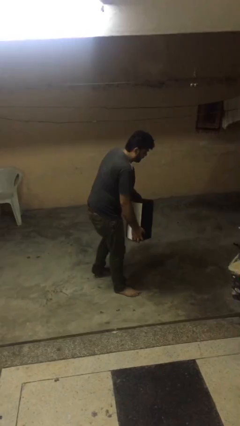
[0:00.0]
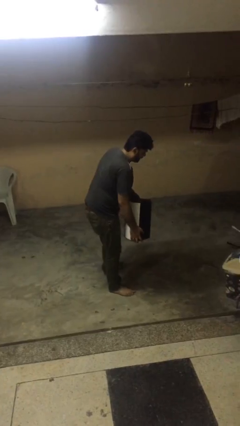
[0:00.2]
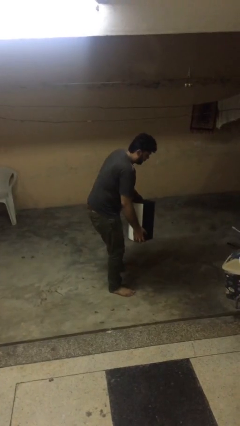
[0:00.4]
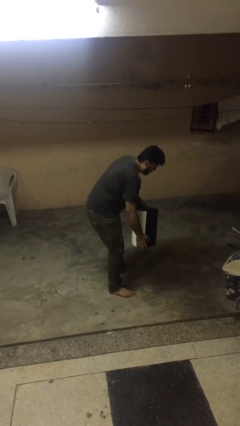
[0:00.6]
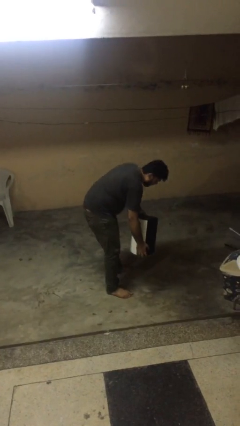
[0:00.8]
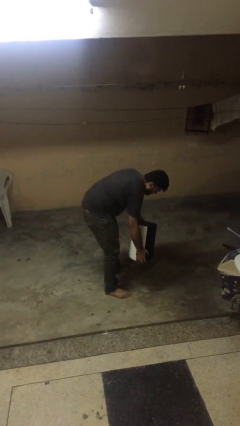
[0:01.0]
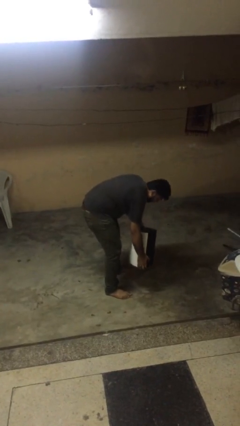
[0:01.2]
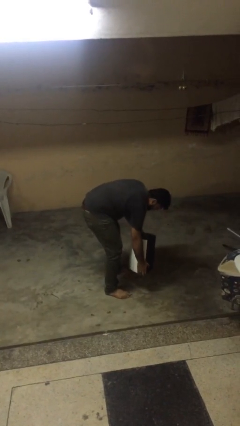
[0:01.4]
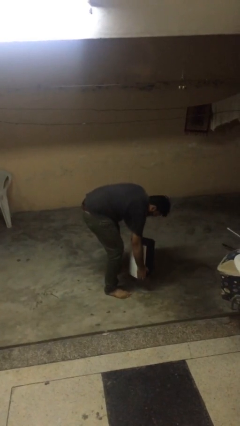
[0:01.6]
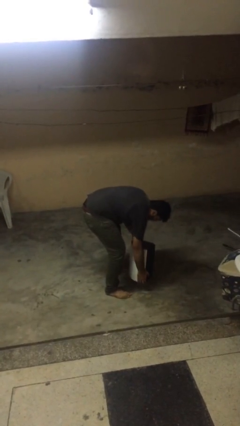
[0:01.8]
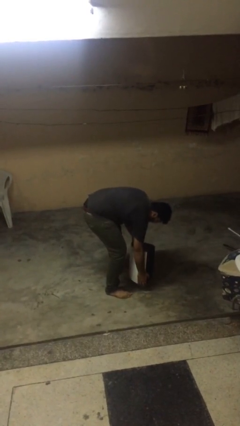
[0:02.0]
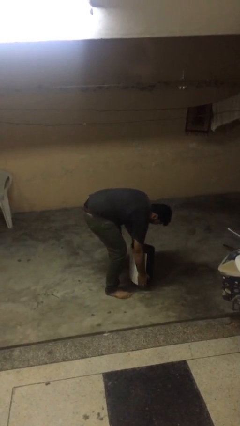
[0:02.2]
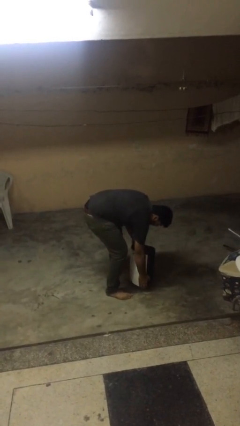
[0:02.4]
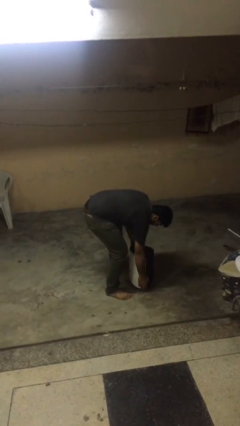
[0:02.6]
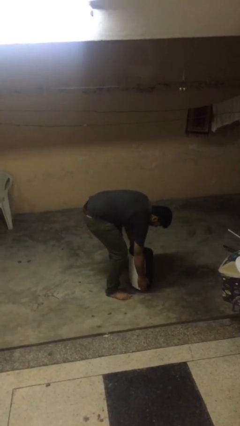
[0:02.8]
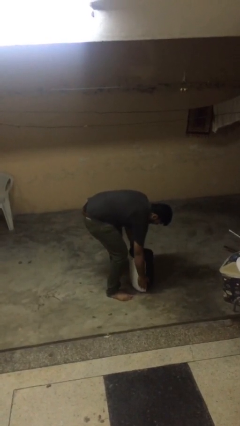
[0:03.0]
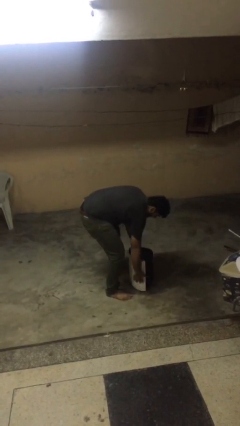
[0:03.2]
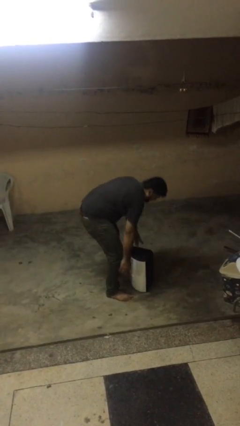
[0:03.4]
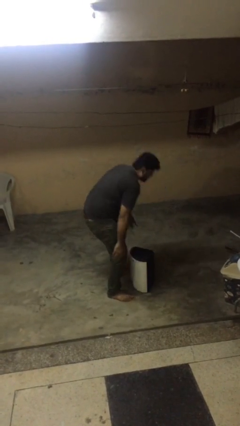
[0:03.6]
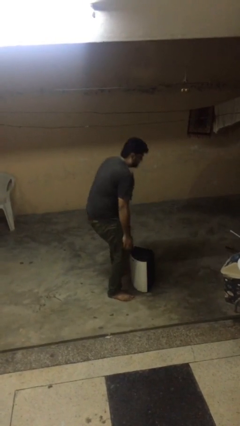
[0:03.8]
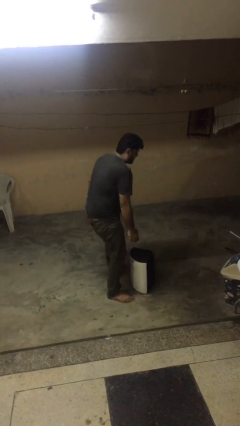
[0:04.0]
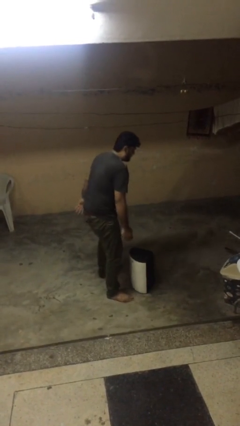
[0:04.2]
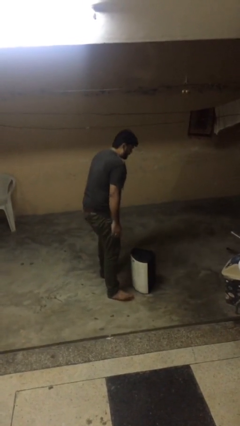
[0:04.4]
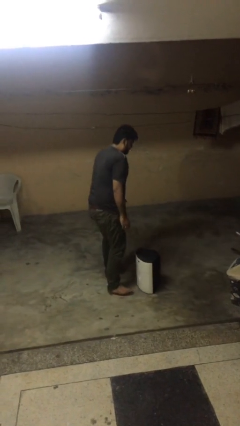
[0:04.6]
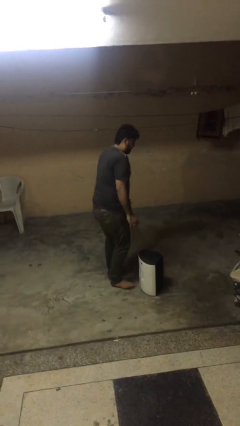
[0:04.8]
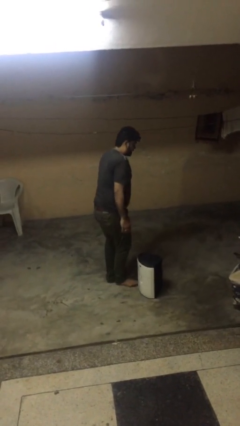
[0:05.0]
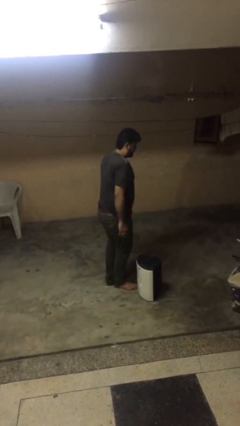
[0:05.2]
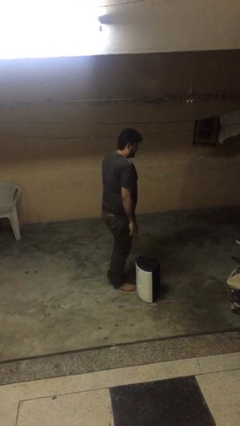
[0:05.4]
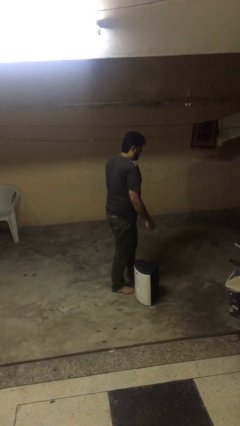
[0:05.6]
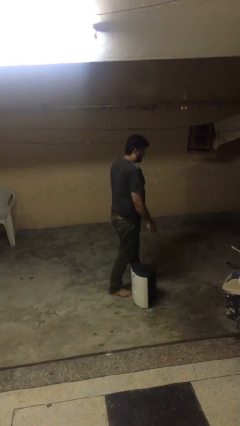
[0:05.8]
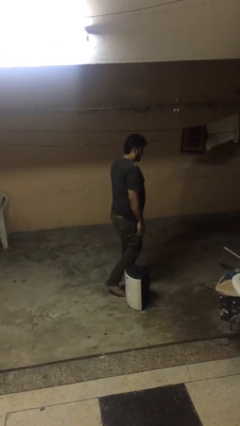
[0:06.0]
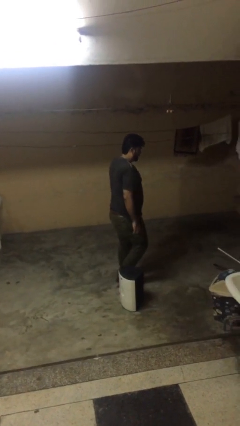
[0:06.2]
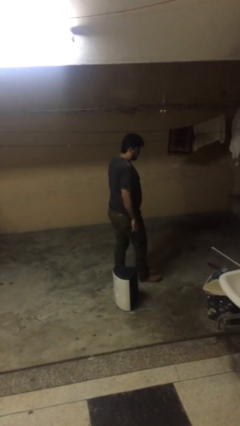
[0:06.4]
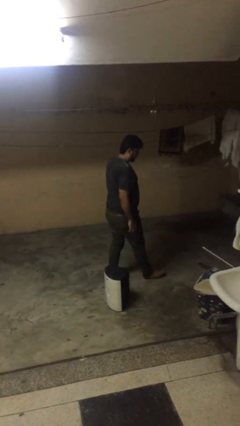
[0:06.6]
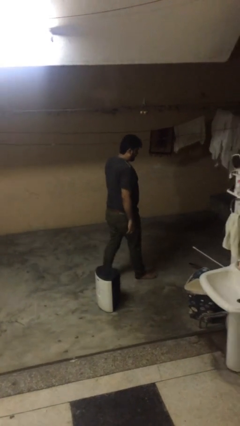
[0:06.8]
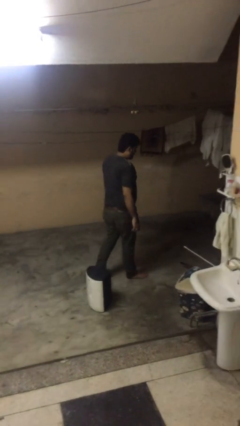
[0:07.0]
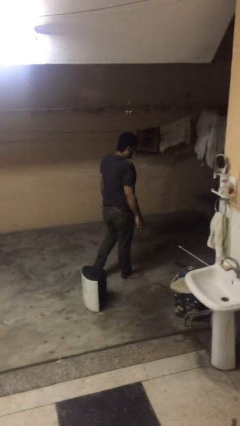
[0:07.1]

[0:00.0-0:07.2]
person puts down object on floor

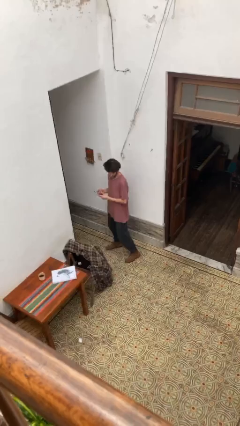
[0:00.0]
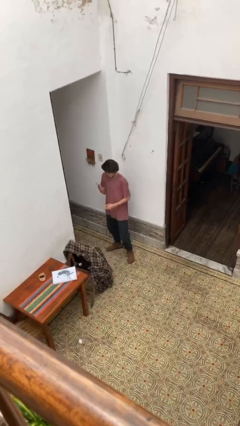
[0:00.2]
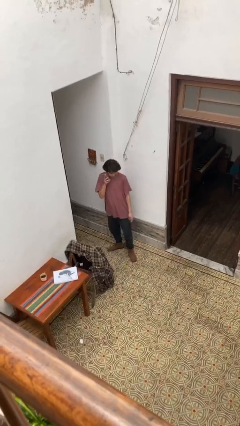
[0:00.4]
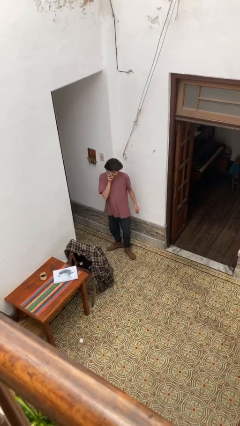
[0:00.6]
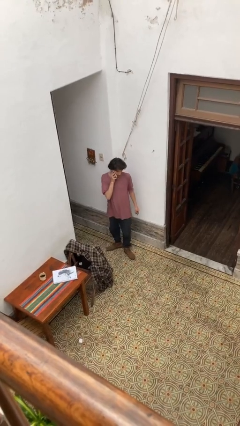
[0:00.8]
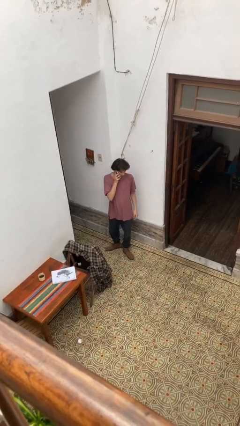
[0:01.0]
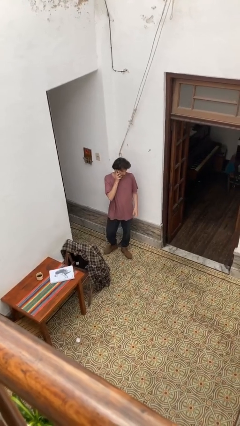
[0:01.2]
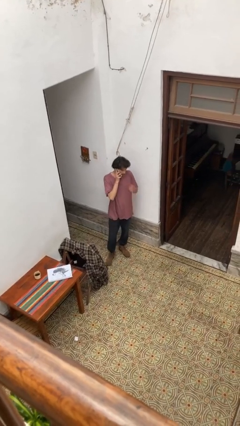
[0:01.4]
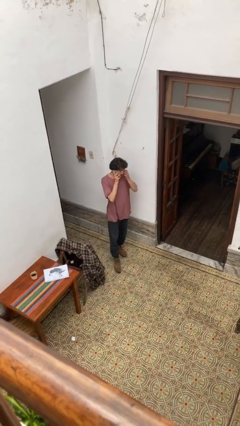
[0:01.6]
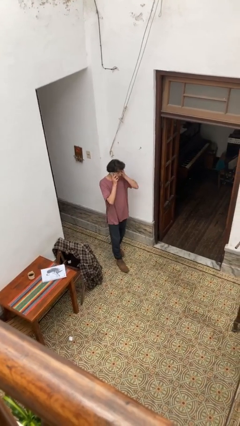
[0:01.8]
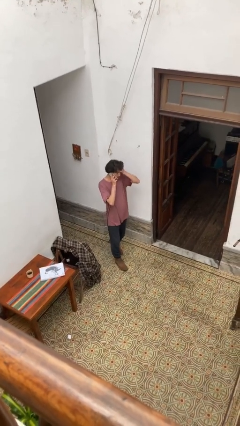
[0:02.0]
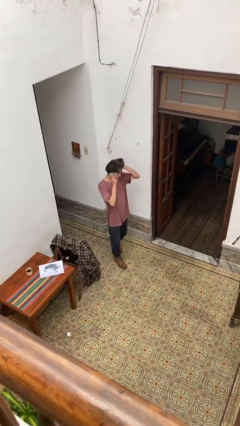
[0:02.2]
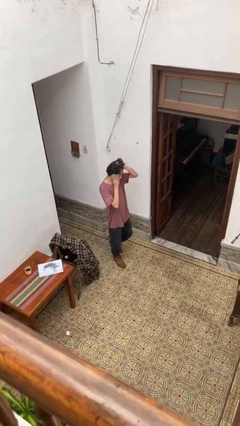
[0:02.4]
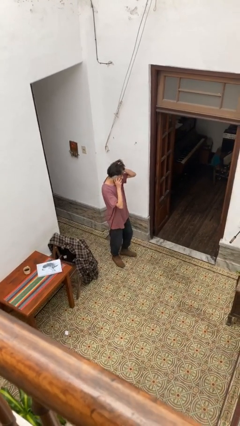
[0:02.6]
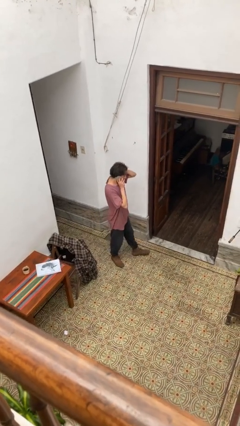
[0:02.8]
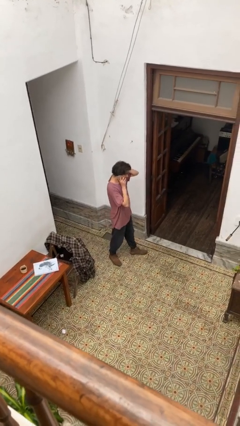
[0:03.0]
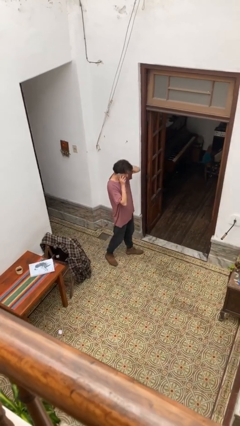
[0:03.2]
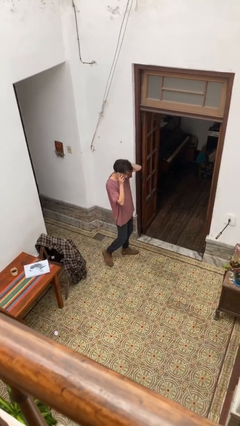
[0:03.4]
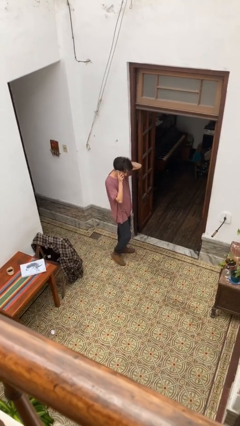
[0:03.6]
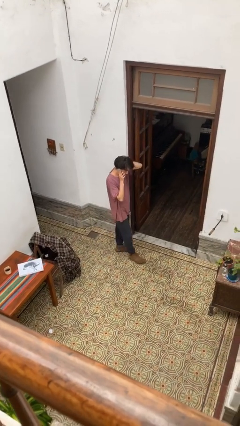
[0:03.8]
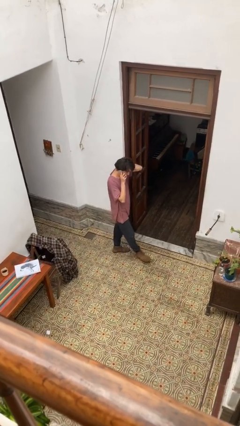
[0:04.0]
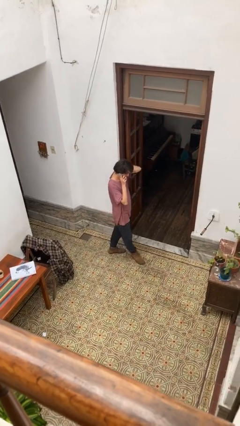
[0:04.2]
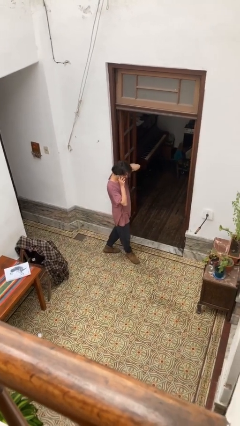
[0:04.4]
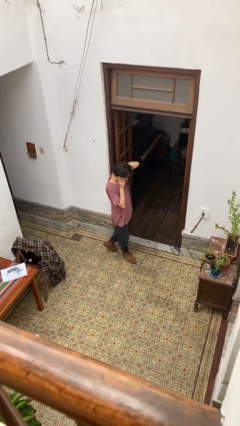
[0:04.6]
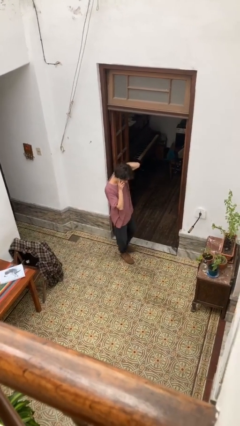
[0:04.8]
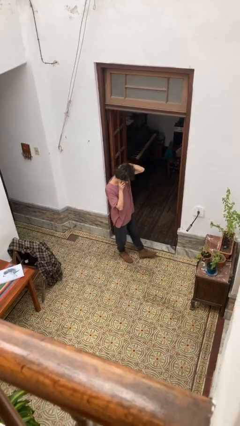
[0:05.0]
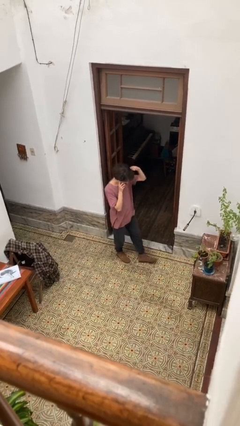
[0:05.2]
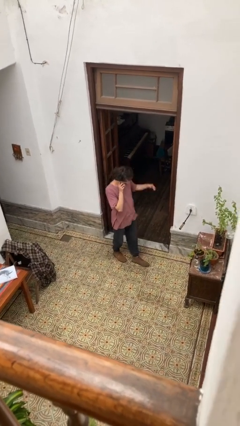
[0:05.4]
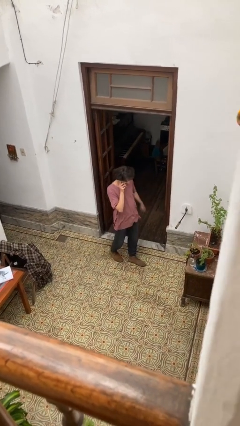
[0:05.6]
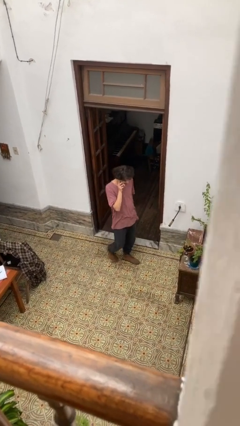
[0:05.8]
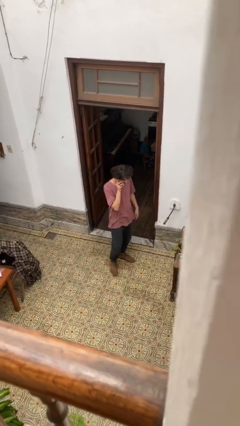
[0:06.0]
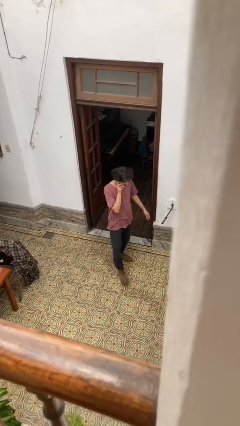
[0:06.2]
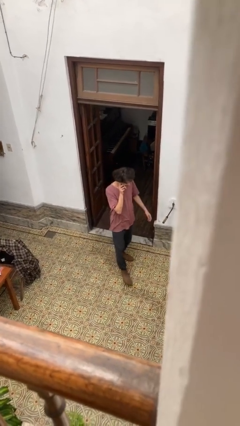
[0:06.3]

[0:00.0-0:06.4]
person talks on phone

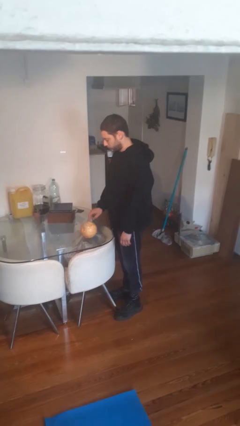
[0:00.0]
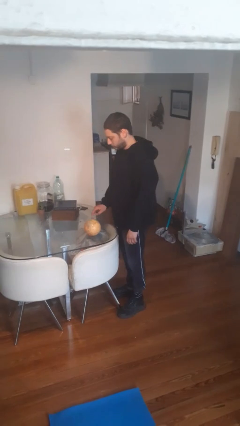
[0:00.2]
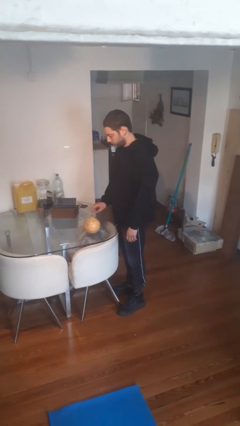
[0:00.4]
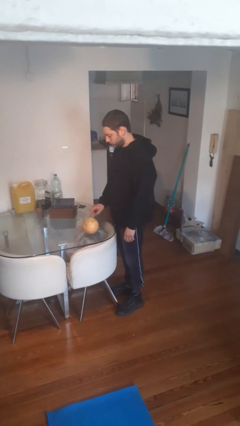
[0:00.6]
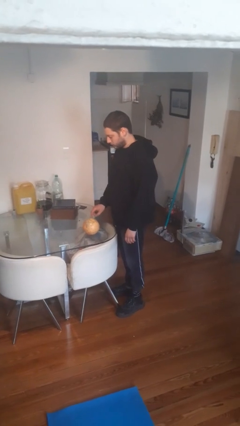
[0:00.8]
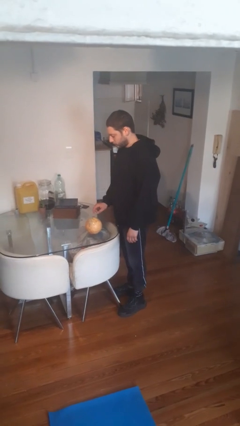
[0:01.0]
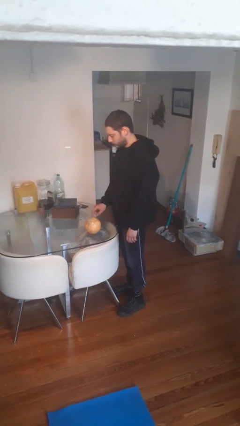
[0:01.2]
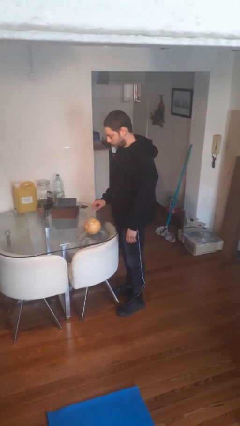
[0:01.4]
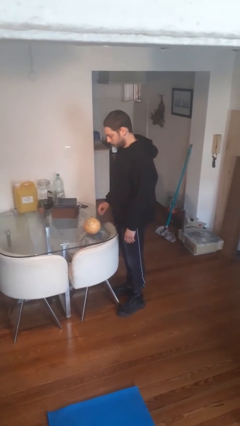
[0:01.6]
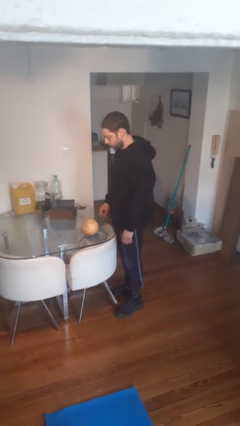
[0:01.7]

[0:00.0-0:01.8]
person taps object with finger

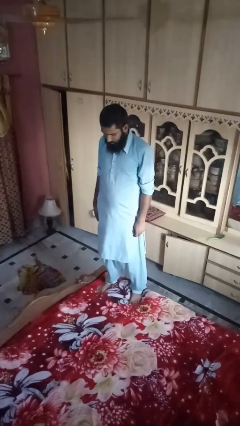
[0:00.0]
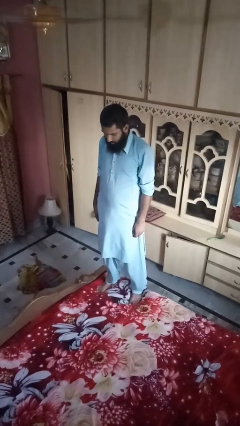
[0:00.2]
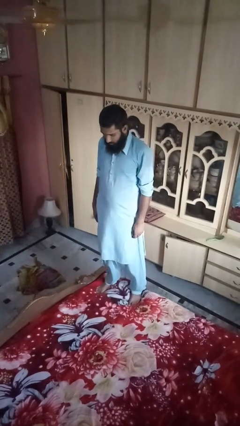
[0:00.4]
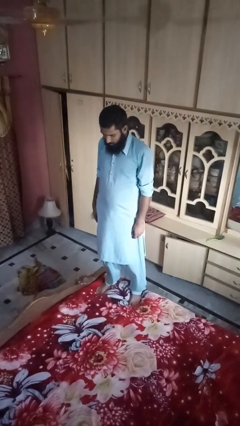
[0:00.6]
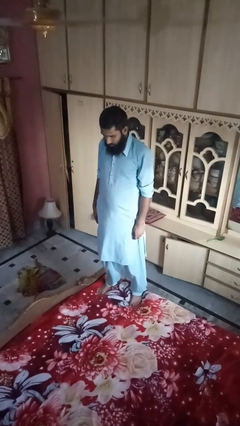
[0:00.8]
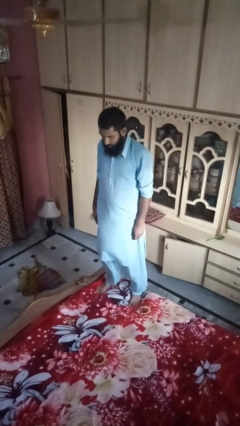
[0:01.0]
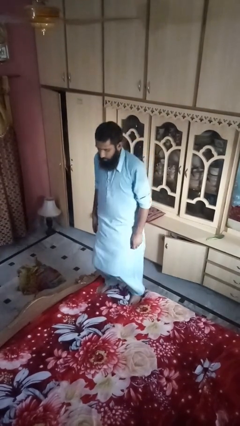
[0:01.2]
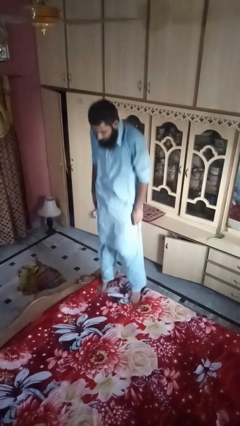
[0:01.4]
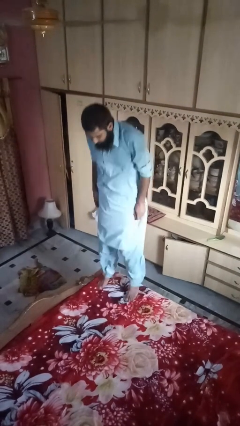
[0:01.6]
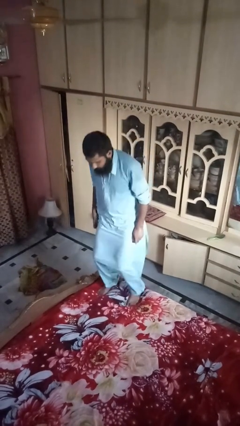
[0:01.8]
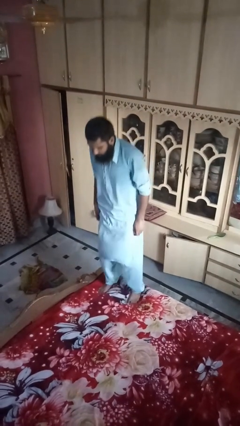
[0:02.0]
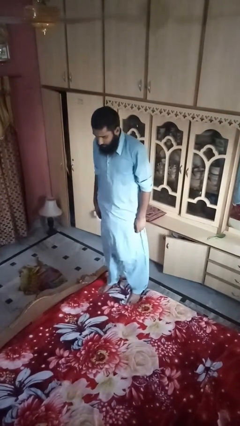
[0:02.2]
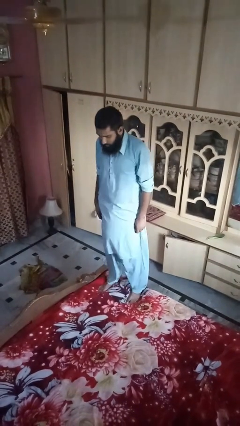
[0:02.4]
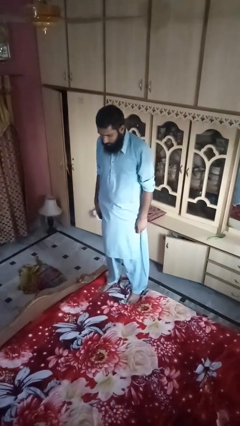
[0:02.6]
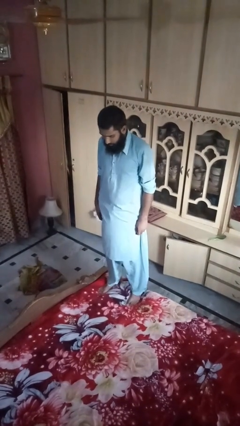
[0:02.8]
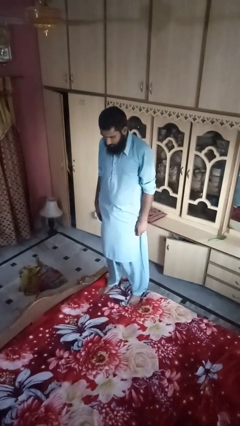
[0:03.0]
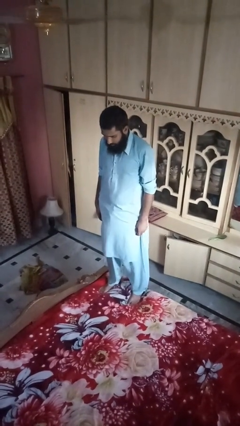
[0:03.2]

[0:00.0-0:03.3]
person jumps on bed
